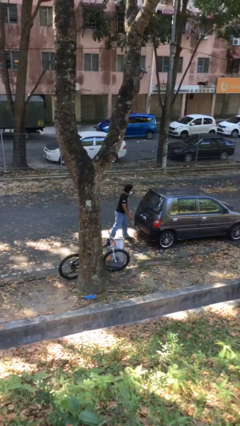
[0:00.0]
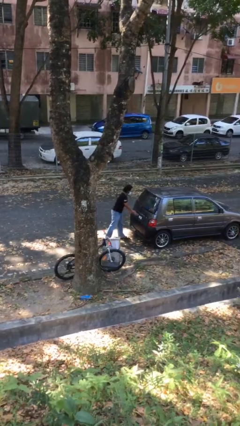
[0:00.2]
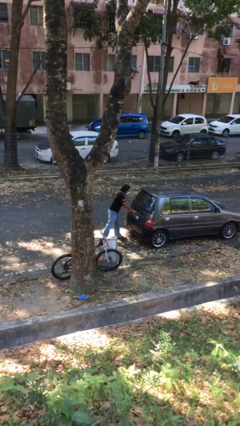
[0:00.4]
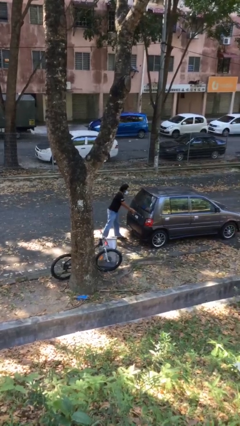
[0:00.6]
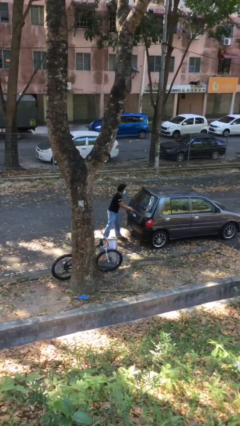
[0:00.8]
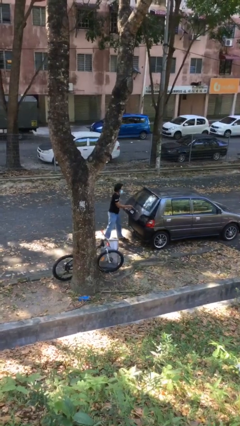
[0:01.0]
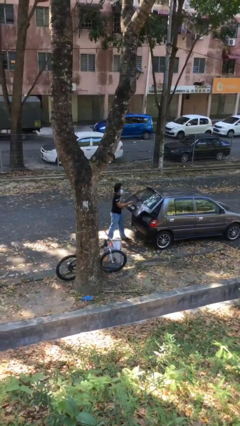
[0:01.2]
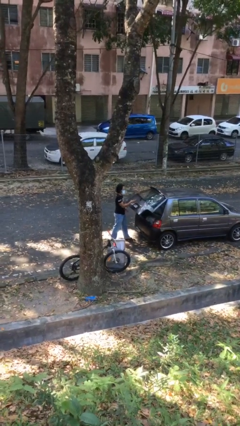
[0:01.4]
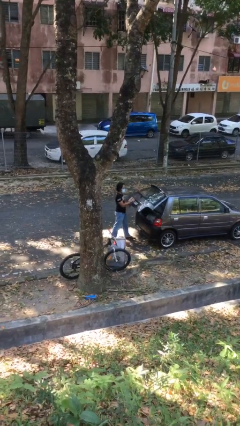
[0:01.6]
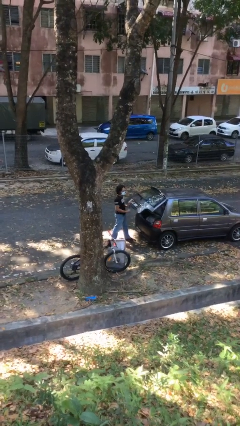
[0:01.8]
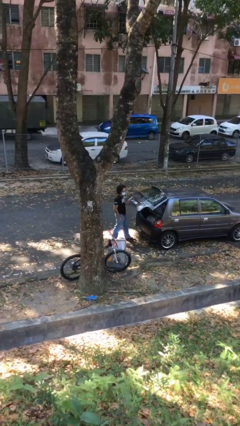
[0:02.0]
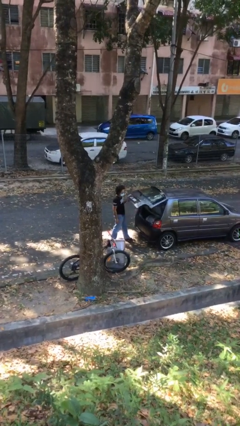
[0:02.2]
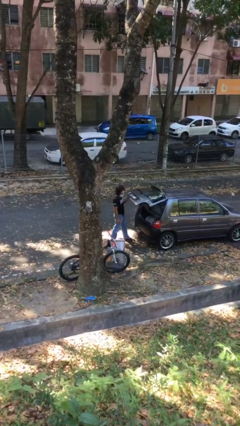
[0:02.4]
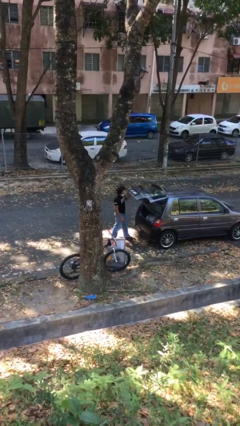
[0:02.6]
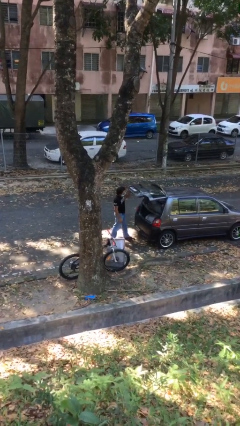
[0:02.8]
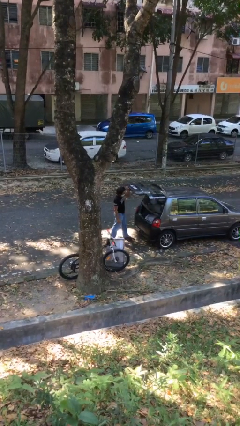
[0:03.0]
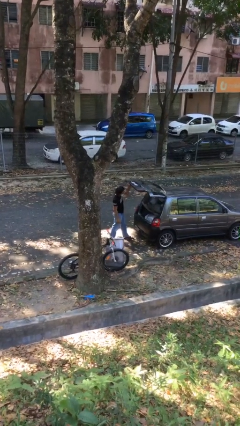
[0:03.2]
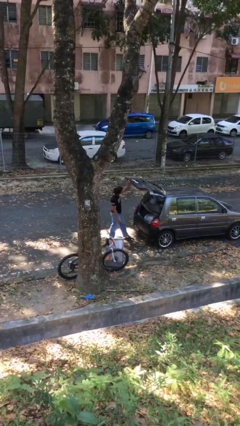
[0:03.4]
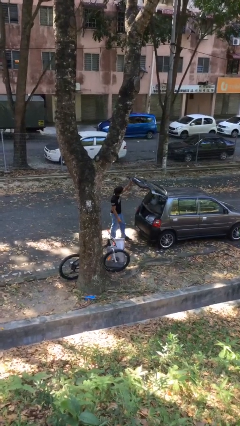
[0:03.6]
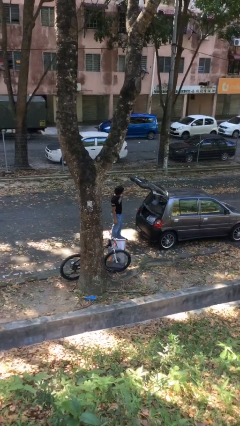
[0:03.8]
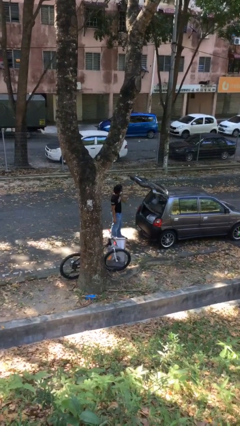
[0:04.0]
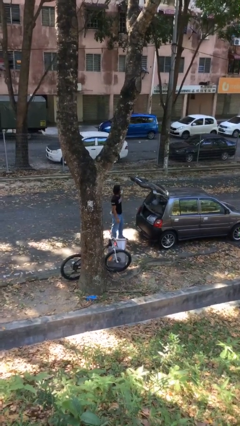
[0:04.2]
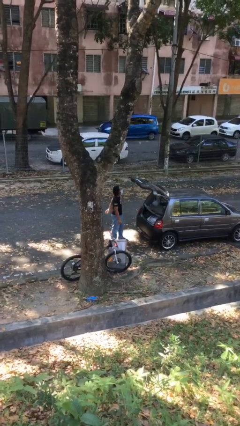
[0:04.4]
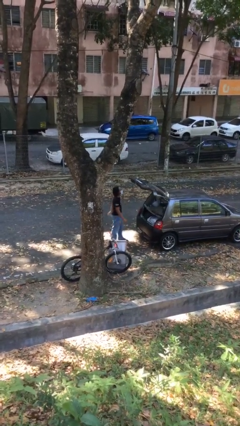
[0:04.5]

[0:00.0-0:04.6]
person opens car trunk

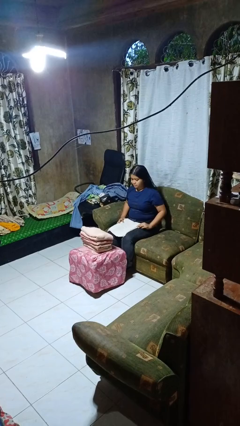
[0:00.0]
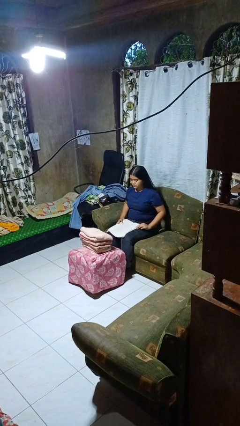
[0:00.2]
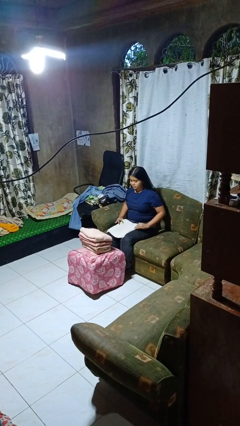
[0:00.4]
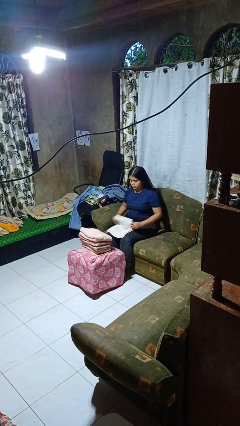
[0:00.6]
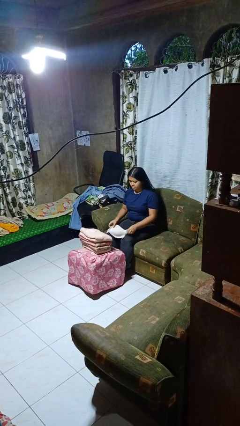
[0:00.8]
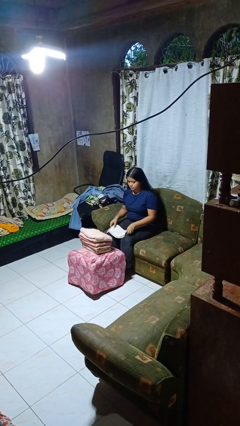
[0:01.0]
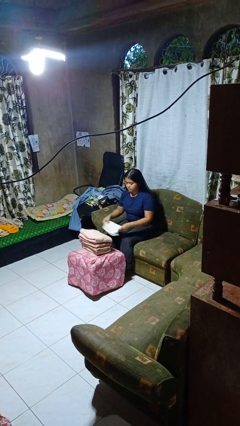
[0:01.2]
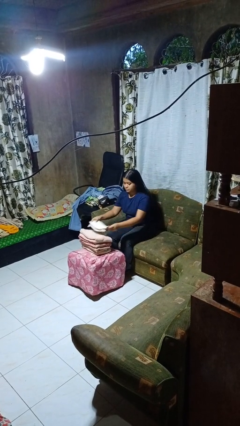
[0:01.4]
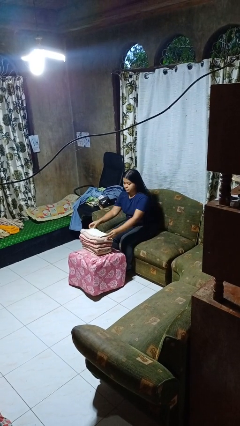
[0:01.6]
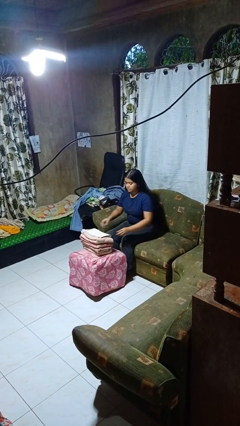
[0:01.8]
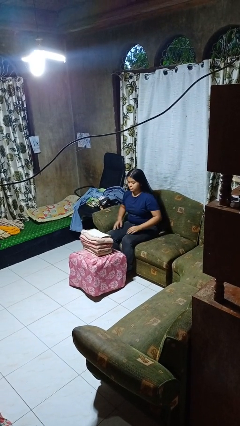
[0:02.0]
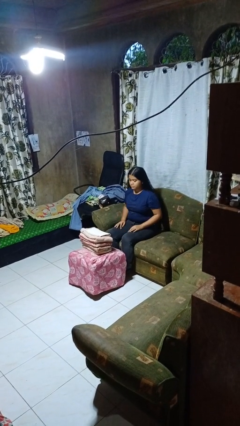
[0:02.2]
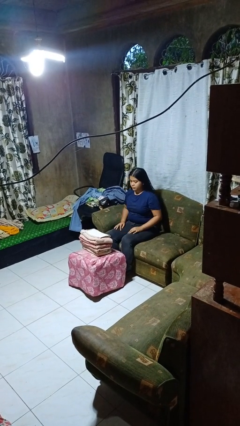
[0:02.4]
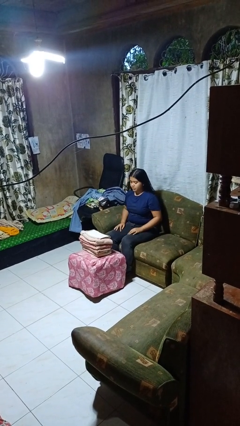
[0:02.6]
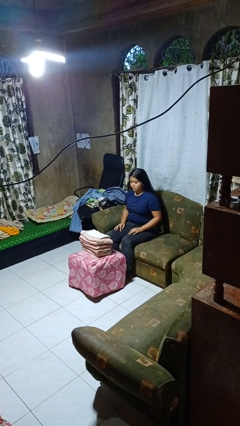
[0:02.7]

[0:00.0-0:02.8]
person folds towel

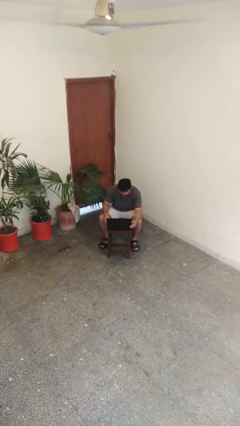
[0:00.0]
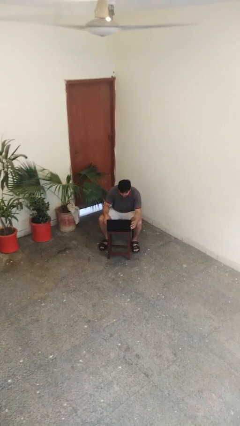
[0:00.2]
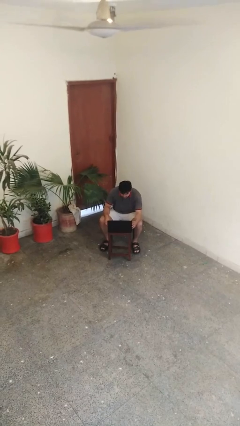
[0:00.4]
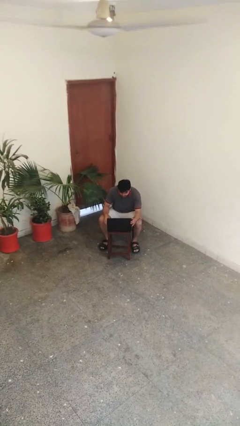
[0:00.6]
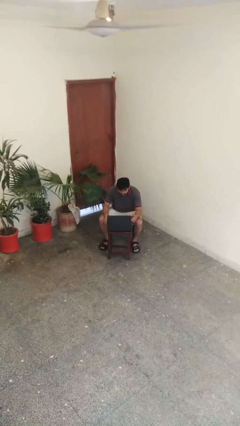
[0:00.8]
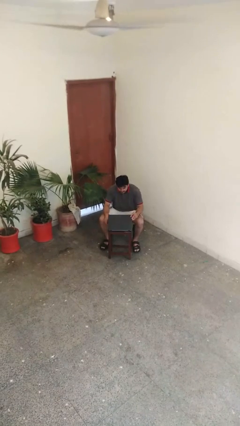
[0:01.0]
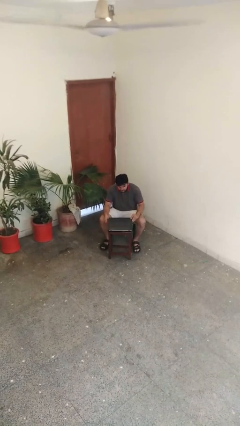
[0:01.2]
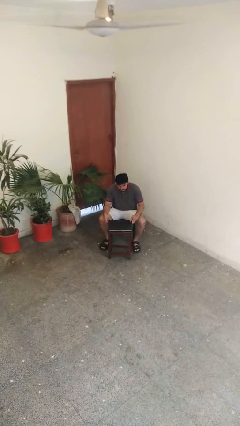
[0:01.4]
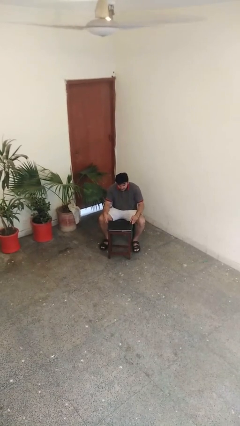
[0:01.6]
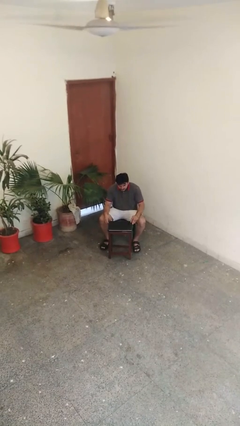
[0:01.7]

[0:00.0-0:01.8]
person closes laptop

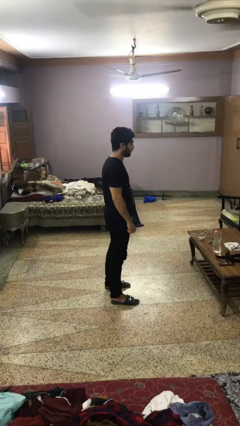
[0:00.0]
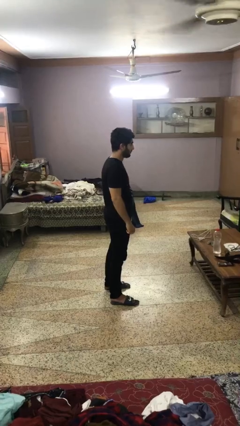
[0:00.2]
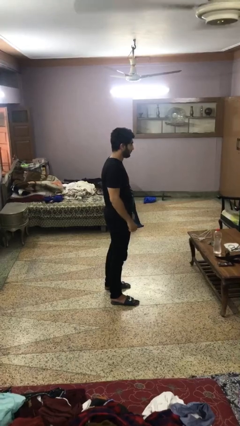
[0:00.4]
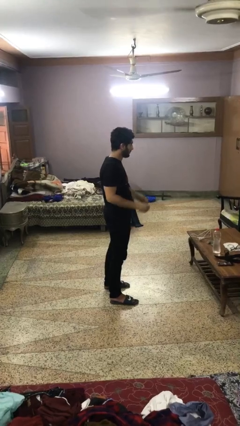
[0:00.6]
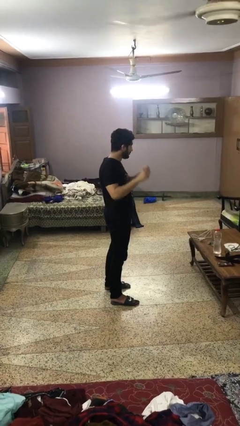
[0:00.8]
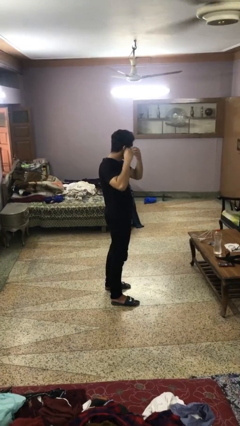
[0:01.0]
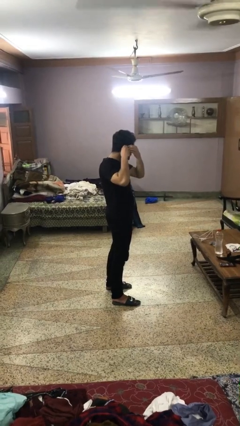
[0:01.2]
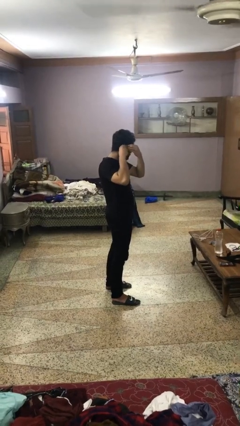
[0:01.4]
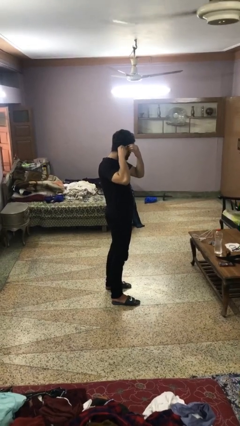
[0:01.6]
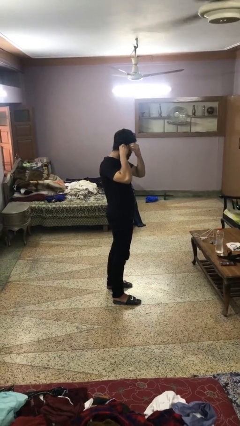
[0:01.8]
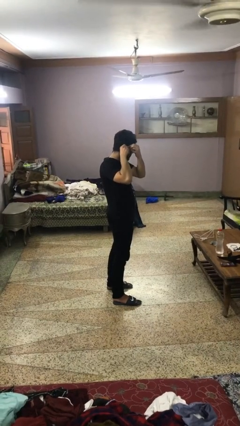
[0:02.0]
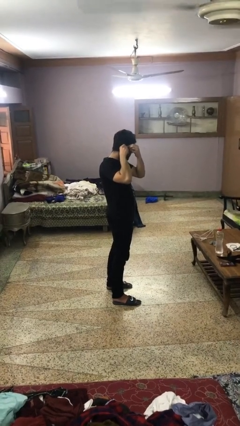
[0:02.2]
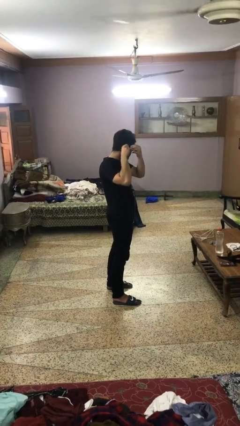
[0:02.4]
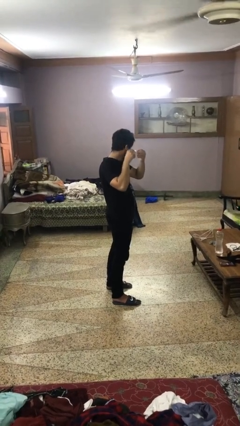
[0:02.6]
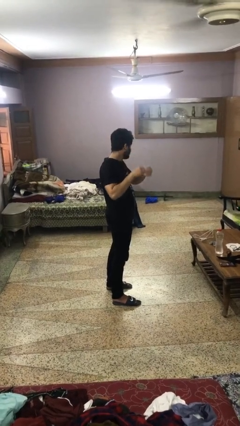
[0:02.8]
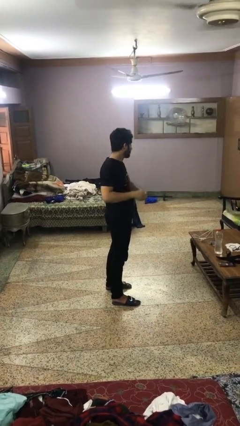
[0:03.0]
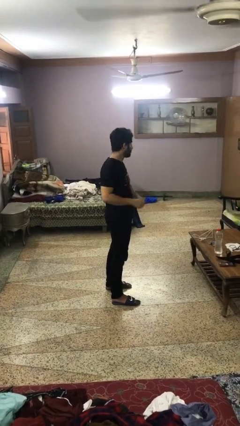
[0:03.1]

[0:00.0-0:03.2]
person takes off earrings

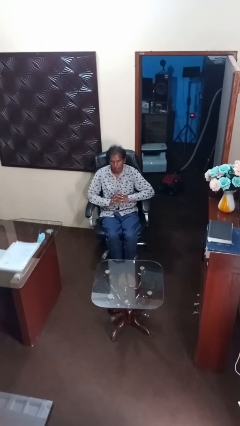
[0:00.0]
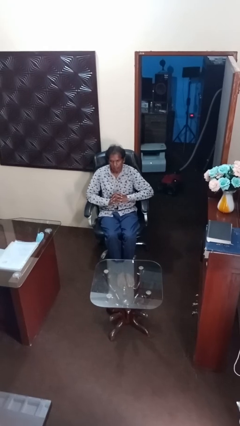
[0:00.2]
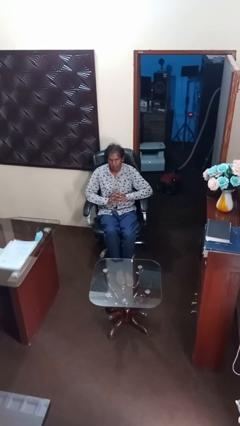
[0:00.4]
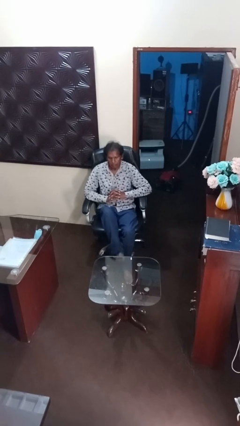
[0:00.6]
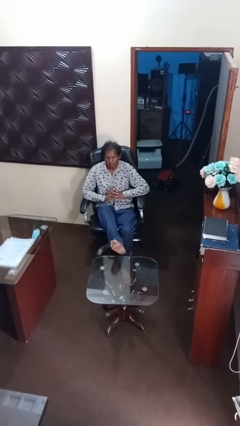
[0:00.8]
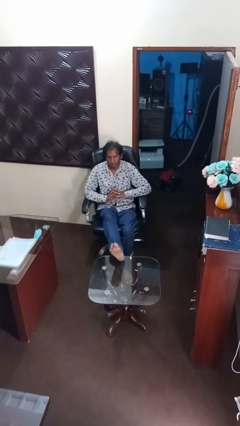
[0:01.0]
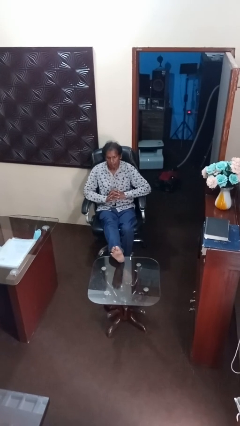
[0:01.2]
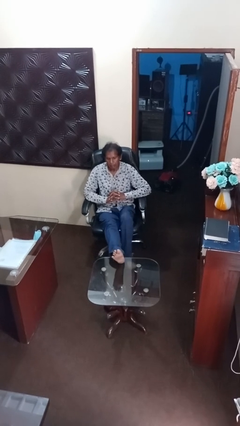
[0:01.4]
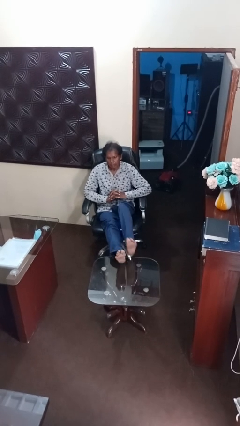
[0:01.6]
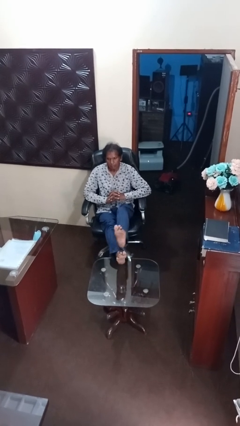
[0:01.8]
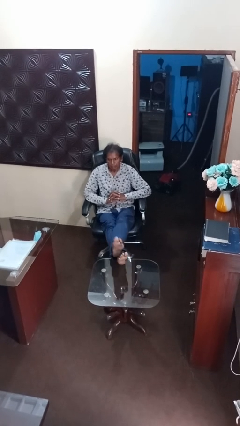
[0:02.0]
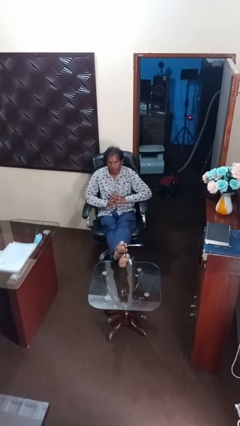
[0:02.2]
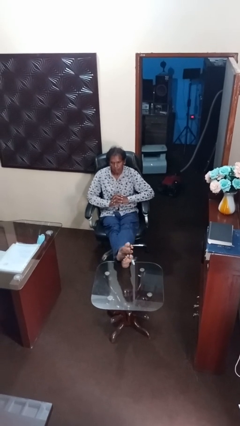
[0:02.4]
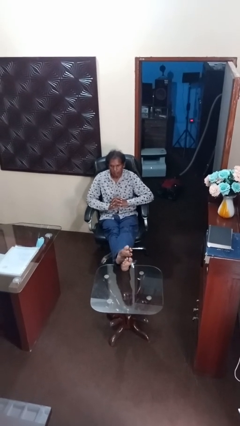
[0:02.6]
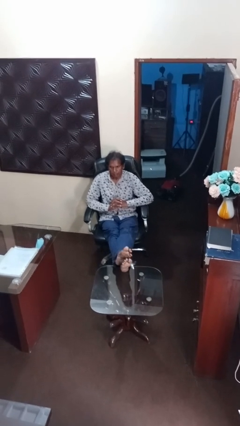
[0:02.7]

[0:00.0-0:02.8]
person puts feet up

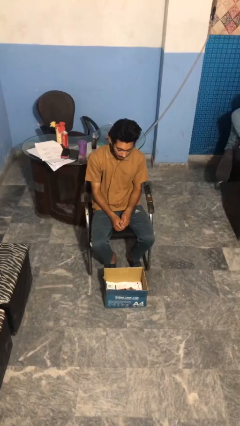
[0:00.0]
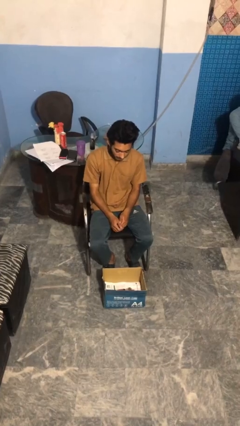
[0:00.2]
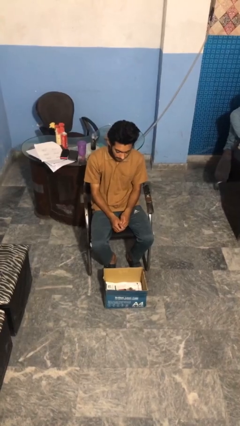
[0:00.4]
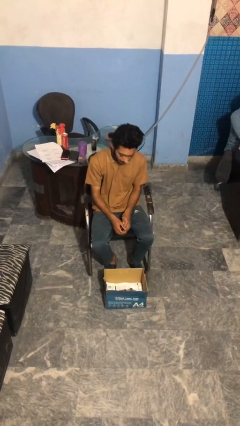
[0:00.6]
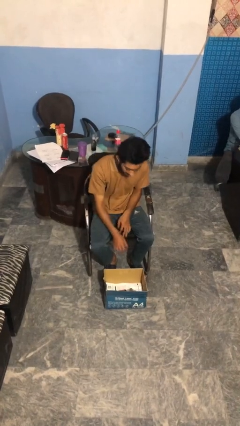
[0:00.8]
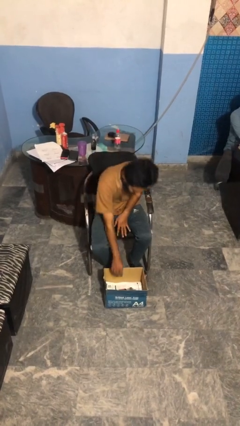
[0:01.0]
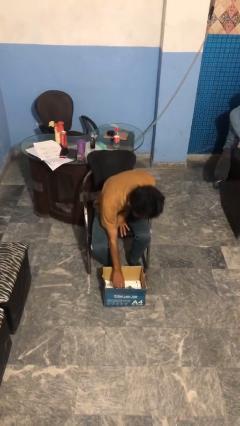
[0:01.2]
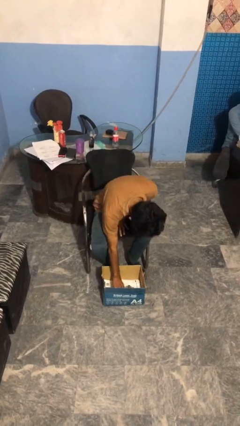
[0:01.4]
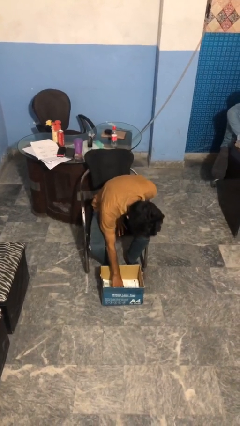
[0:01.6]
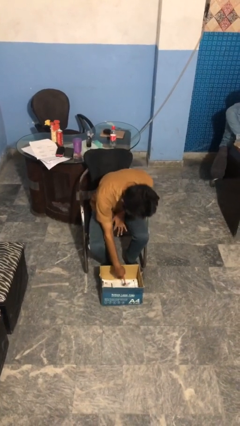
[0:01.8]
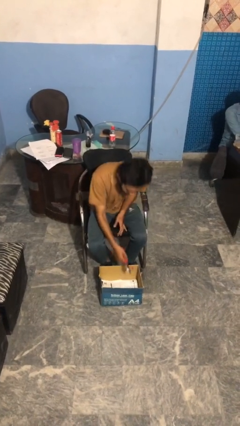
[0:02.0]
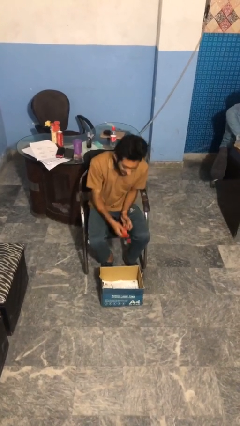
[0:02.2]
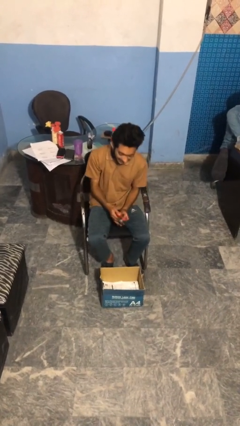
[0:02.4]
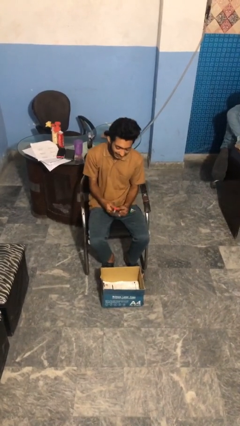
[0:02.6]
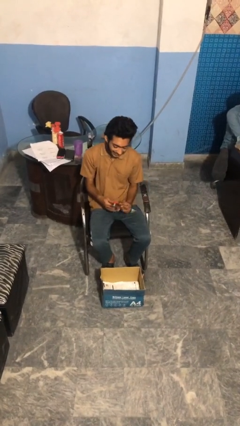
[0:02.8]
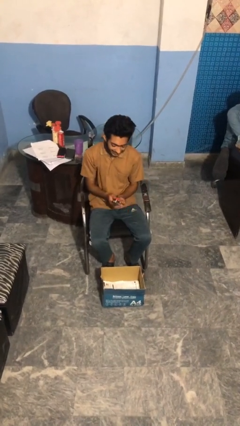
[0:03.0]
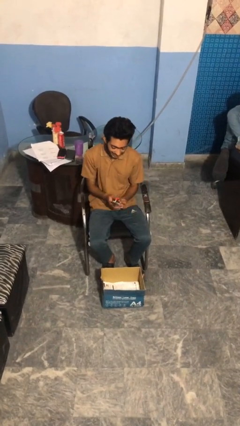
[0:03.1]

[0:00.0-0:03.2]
person takes object from box
